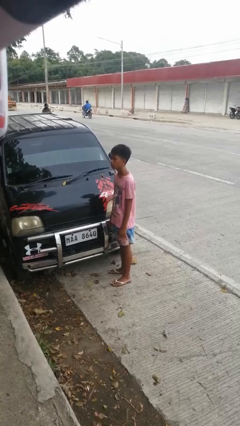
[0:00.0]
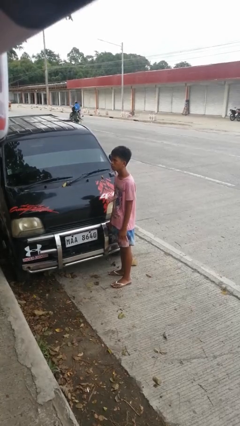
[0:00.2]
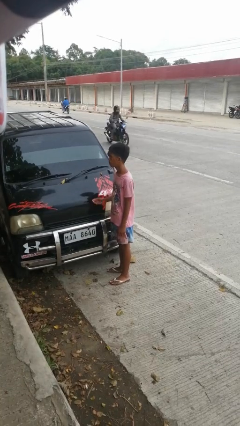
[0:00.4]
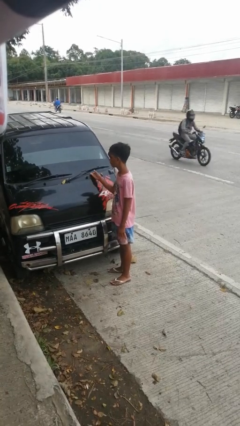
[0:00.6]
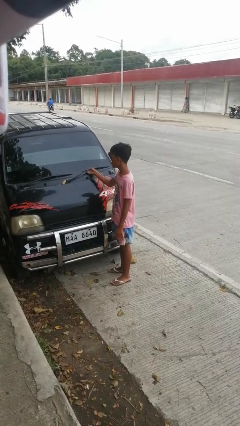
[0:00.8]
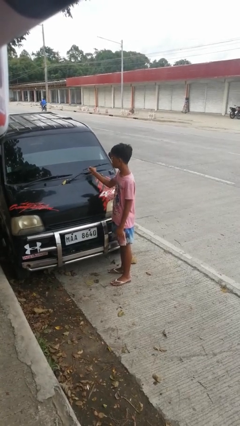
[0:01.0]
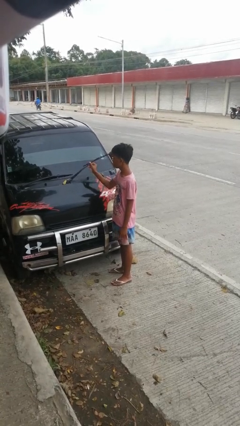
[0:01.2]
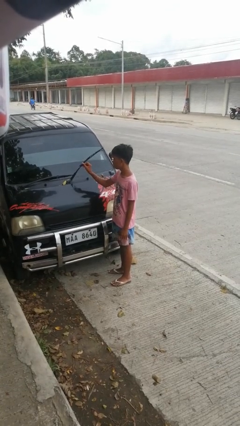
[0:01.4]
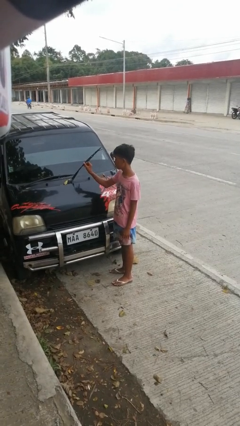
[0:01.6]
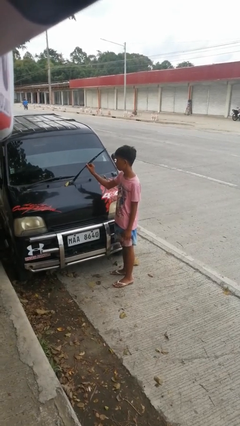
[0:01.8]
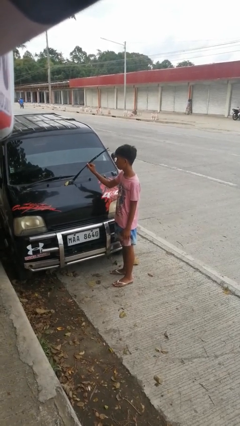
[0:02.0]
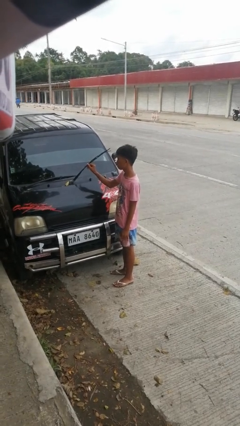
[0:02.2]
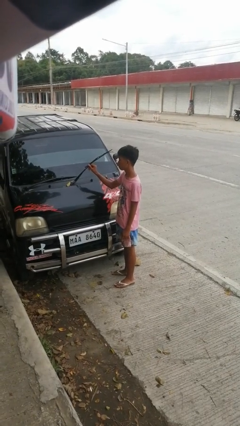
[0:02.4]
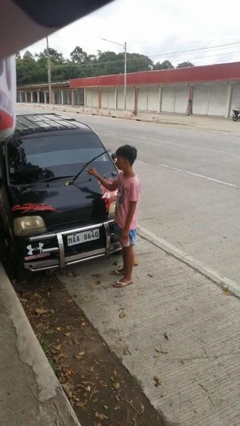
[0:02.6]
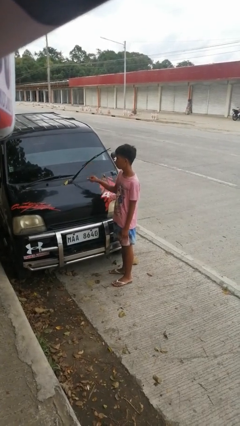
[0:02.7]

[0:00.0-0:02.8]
person flips up car wipers

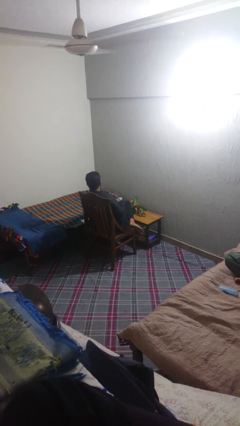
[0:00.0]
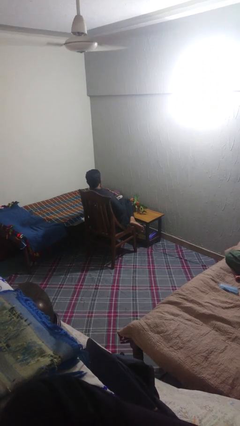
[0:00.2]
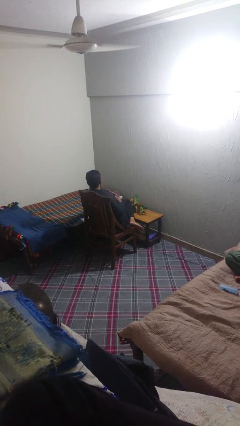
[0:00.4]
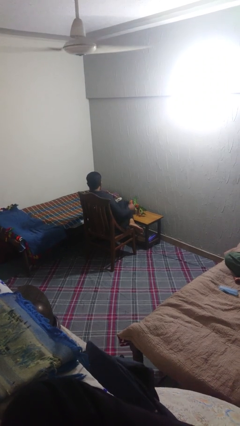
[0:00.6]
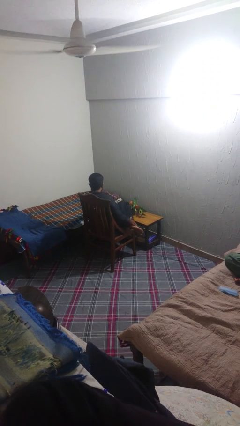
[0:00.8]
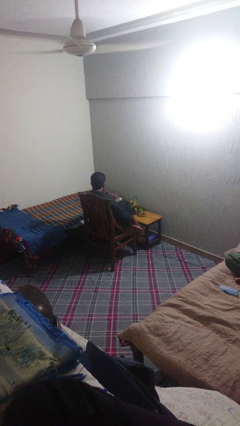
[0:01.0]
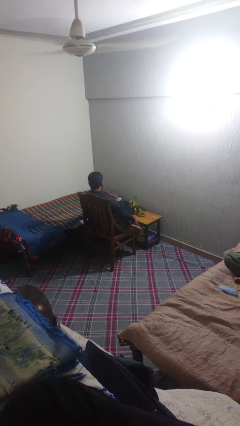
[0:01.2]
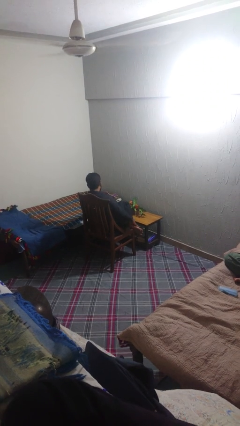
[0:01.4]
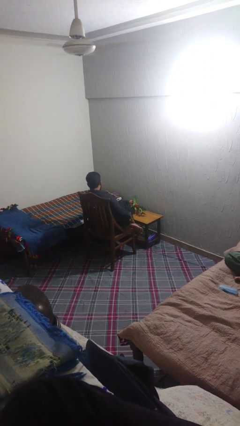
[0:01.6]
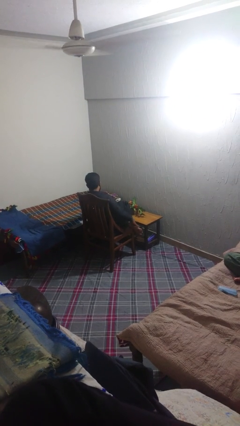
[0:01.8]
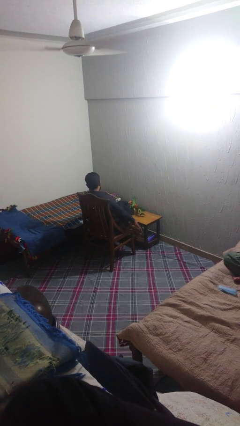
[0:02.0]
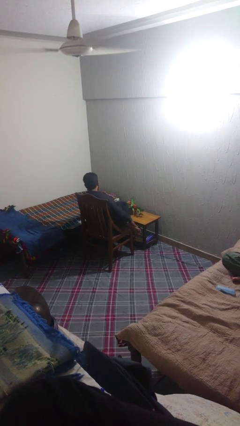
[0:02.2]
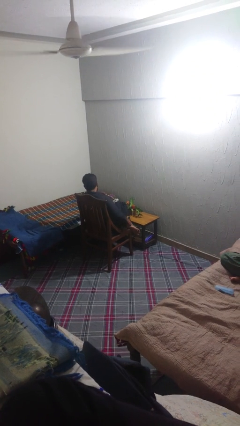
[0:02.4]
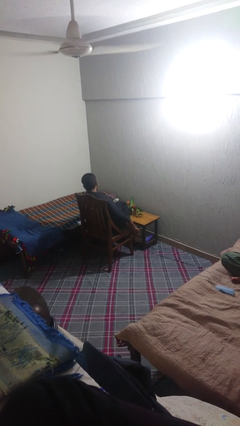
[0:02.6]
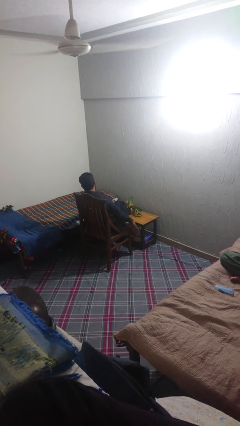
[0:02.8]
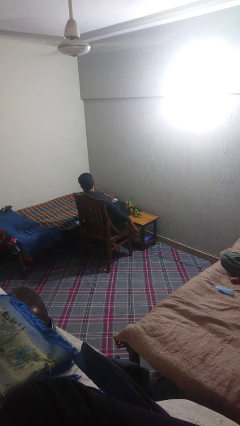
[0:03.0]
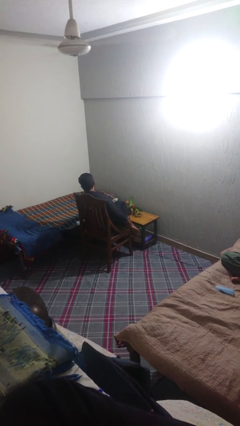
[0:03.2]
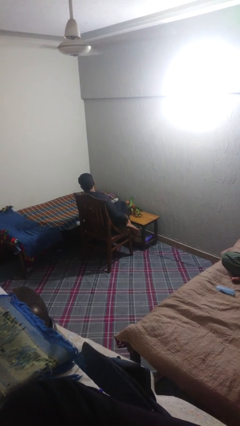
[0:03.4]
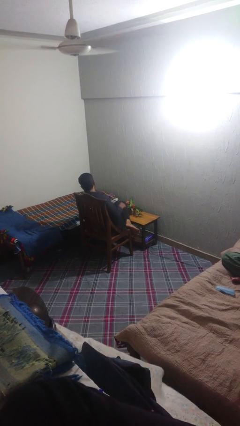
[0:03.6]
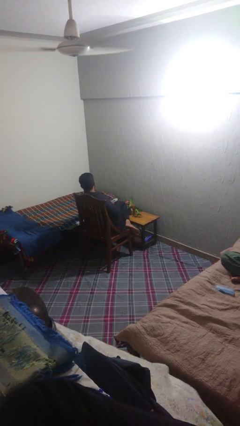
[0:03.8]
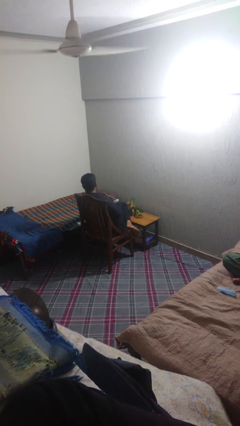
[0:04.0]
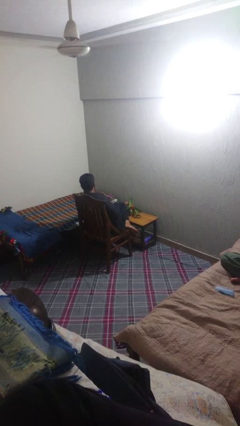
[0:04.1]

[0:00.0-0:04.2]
person rubs foot

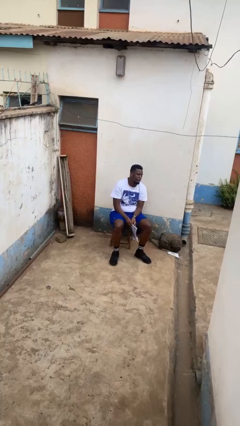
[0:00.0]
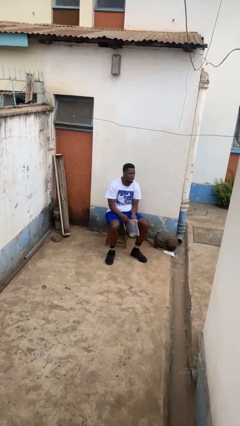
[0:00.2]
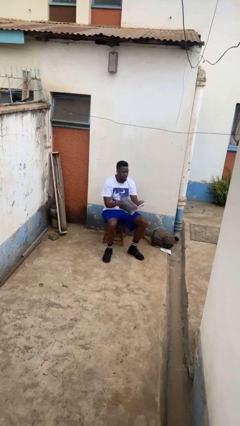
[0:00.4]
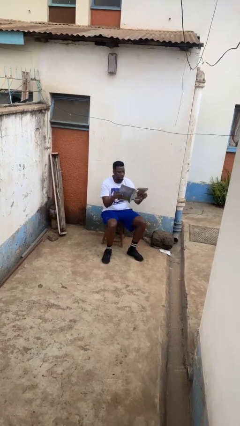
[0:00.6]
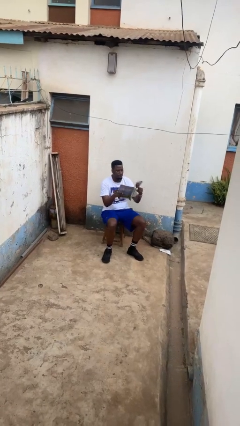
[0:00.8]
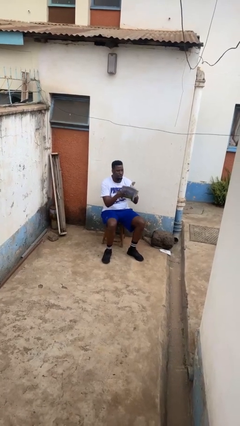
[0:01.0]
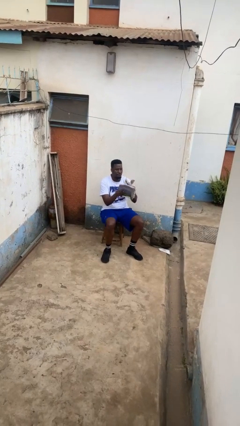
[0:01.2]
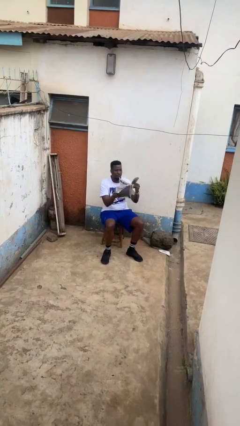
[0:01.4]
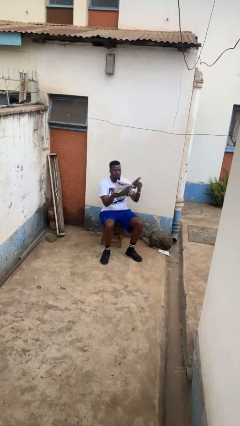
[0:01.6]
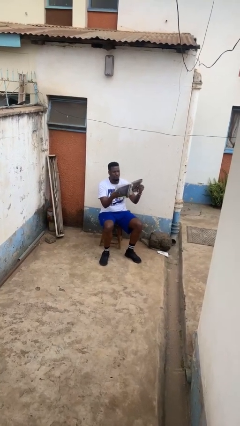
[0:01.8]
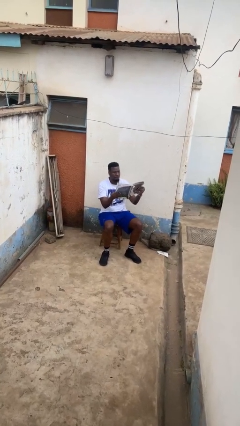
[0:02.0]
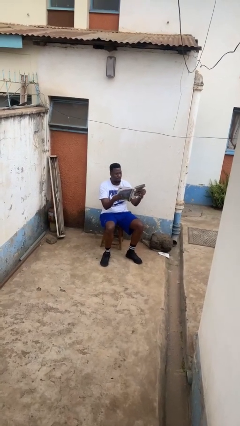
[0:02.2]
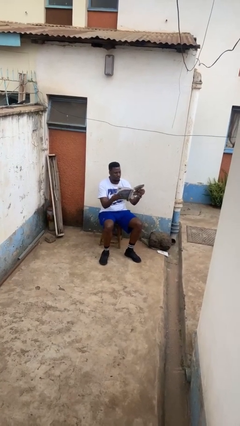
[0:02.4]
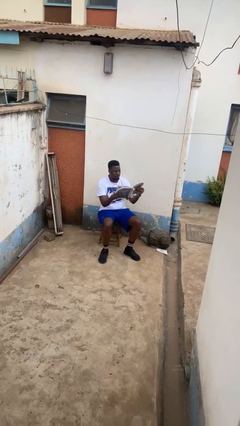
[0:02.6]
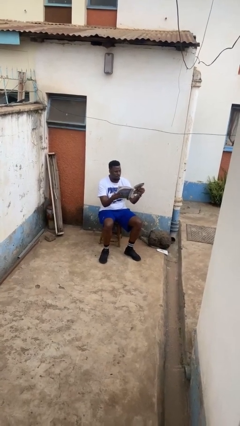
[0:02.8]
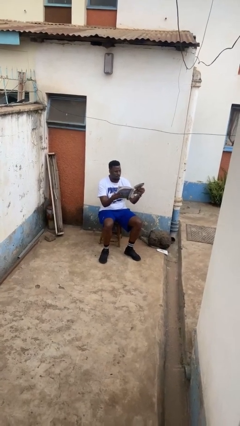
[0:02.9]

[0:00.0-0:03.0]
person reads magazine

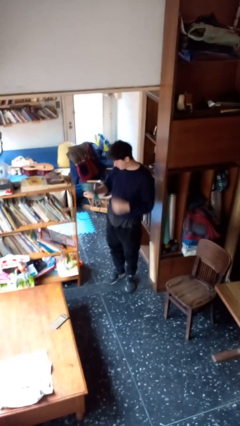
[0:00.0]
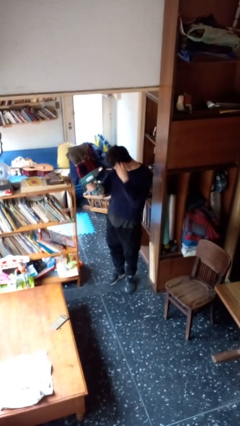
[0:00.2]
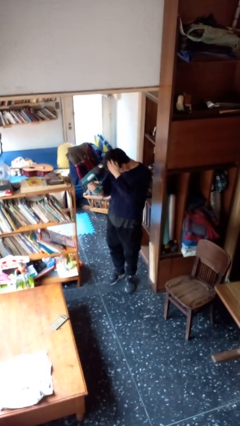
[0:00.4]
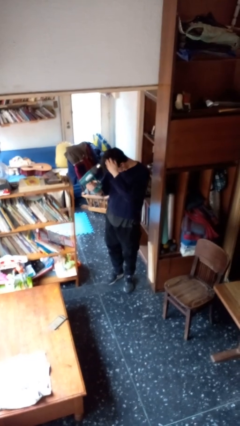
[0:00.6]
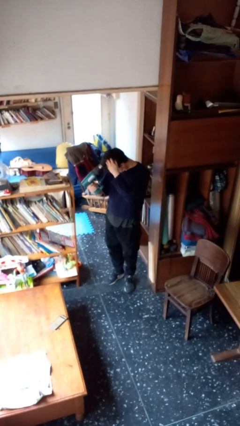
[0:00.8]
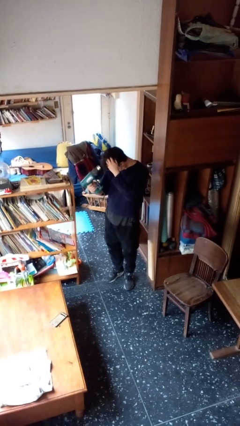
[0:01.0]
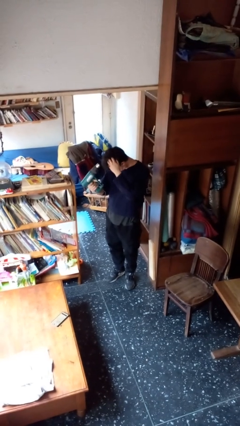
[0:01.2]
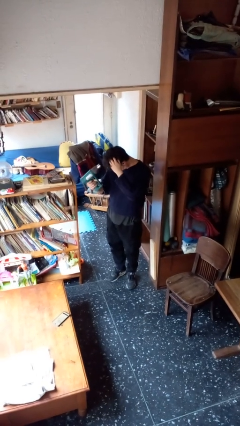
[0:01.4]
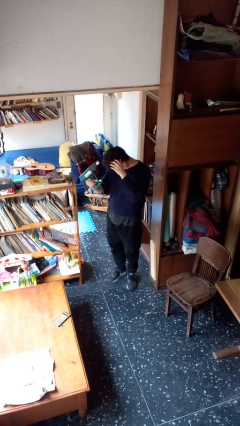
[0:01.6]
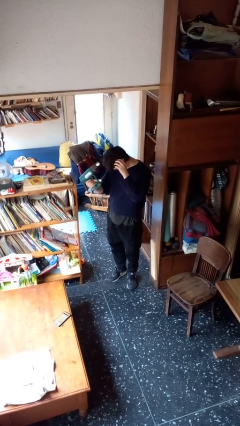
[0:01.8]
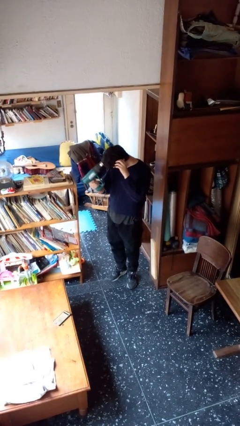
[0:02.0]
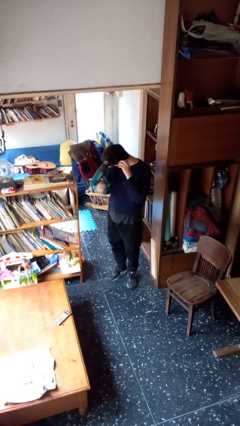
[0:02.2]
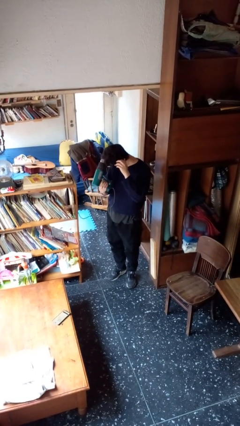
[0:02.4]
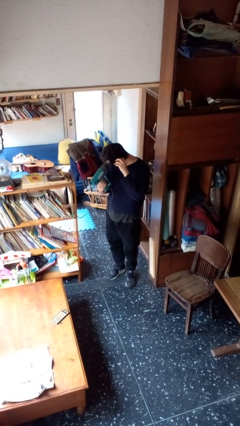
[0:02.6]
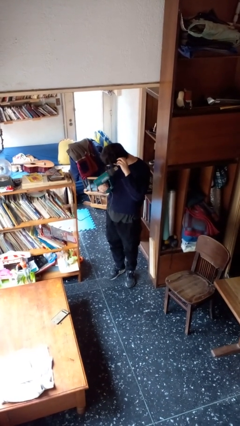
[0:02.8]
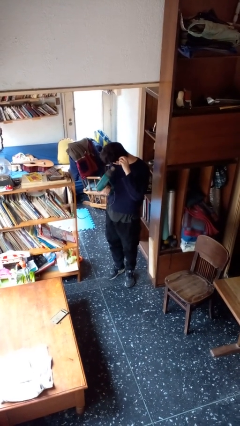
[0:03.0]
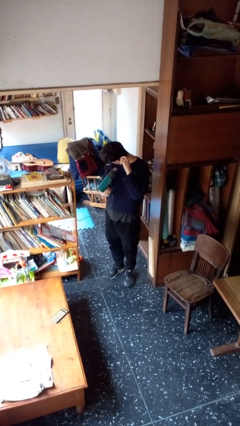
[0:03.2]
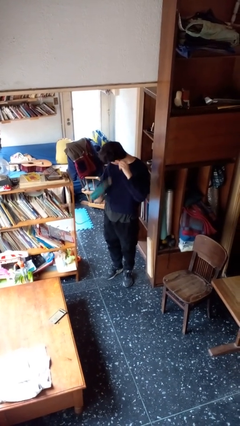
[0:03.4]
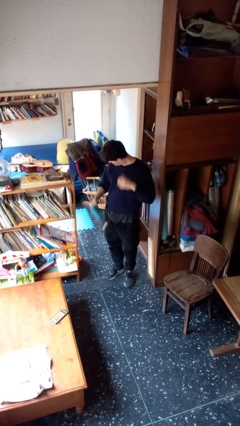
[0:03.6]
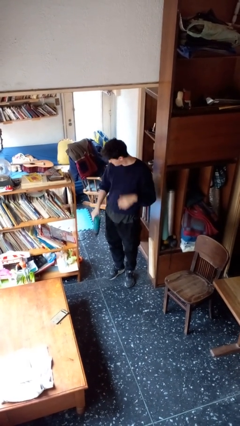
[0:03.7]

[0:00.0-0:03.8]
person dries hair with hairdryer

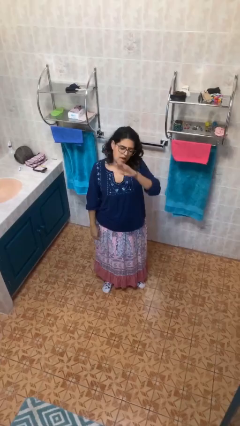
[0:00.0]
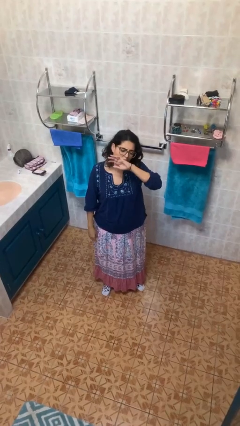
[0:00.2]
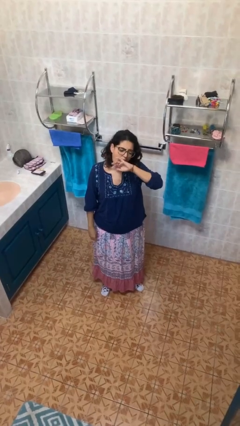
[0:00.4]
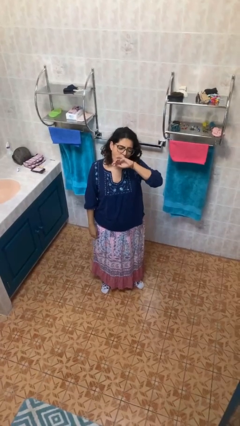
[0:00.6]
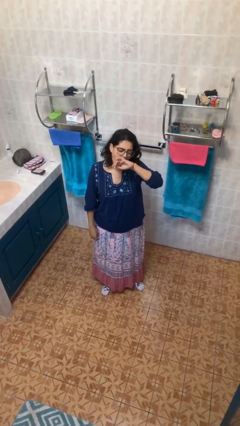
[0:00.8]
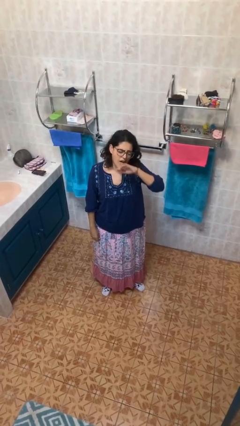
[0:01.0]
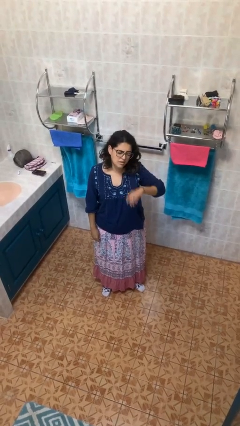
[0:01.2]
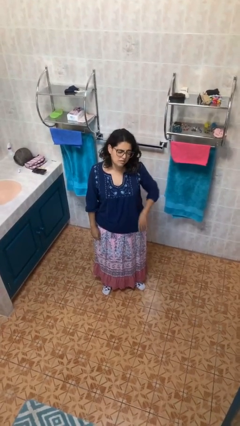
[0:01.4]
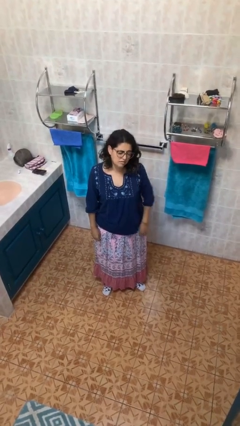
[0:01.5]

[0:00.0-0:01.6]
person yawns

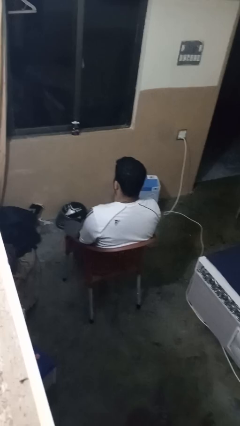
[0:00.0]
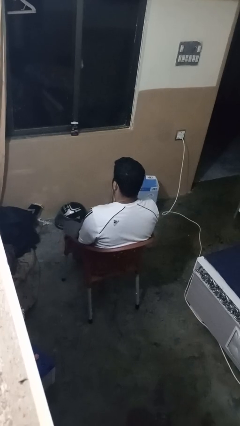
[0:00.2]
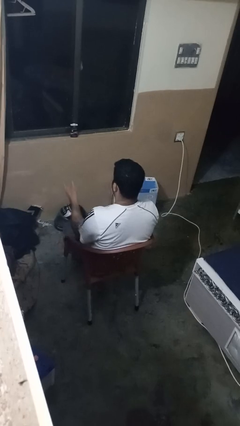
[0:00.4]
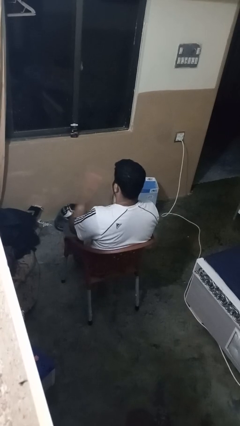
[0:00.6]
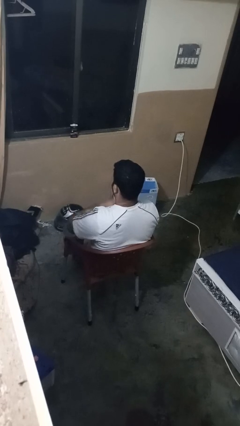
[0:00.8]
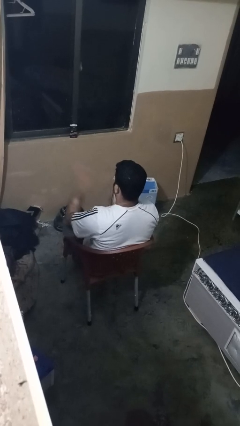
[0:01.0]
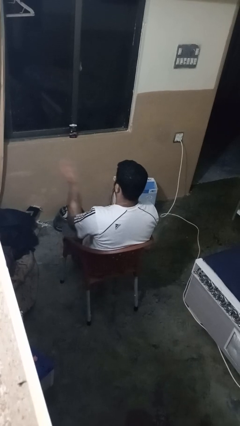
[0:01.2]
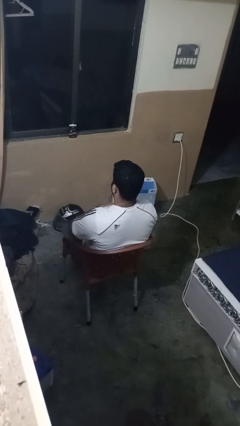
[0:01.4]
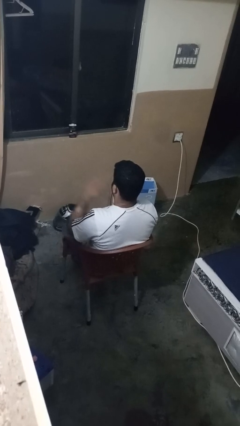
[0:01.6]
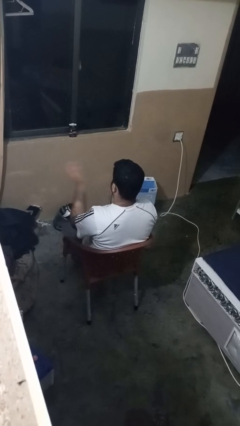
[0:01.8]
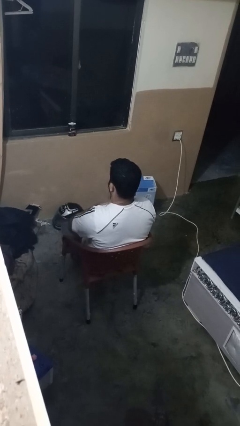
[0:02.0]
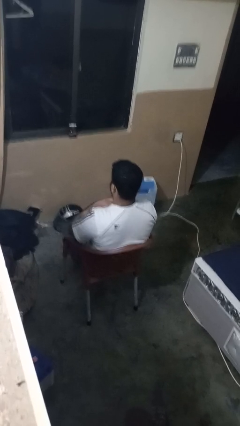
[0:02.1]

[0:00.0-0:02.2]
person drums on chest
